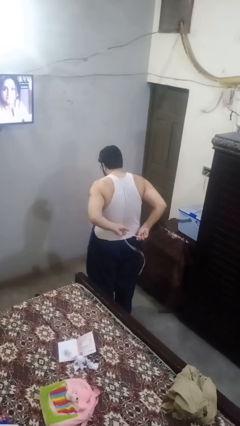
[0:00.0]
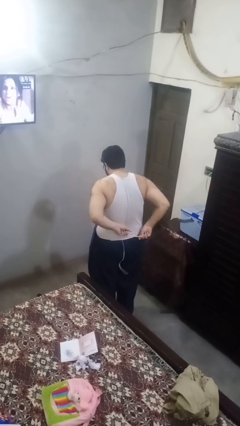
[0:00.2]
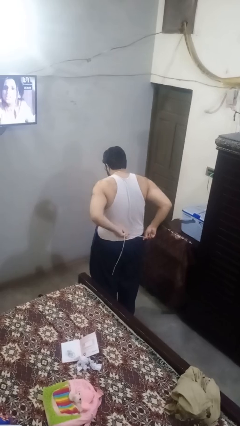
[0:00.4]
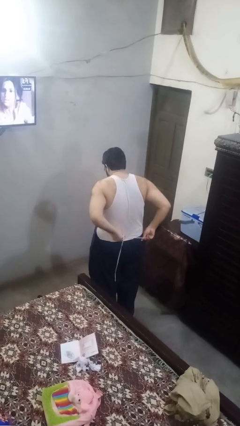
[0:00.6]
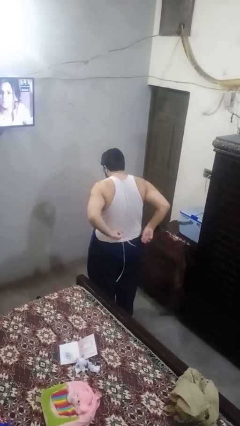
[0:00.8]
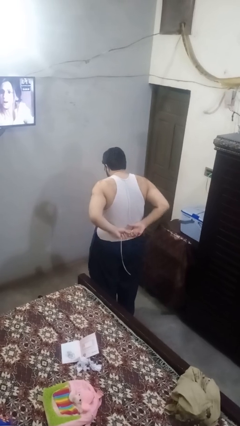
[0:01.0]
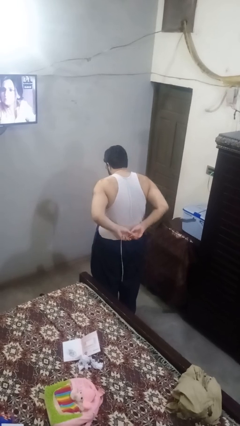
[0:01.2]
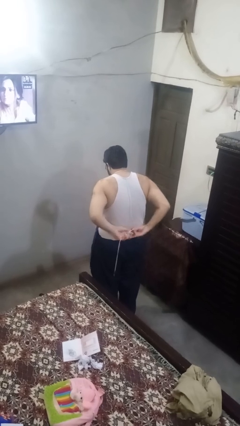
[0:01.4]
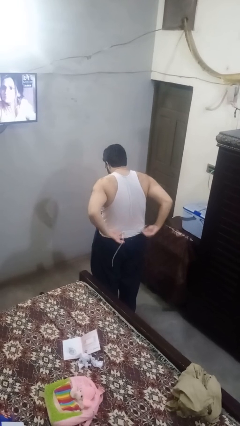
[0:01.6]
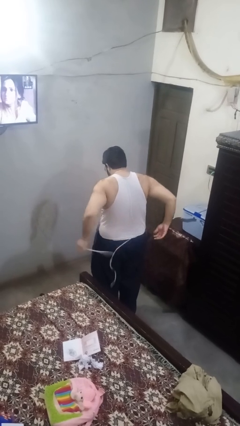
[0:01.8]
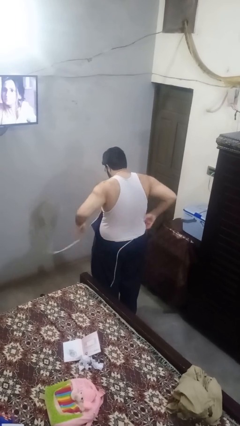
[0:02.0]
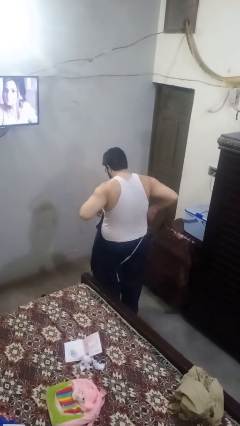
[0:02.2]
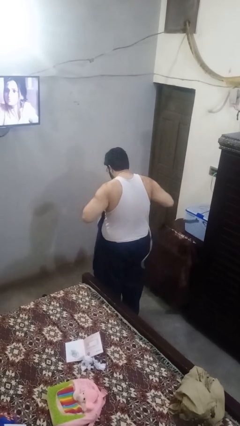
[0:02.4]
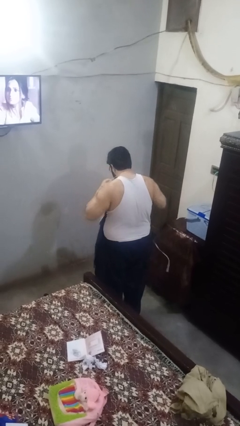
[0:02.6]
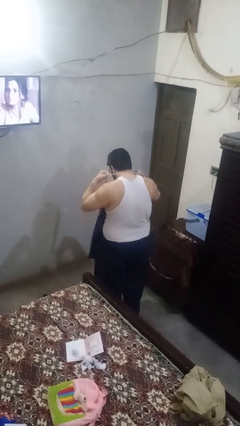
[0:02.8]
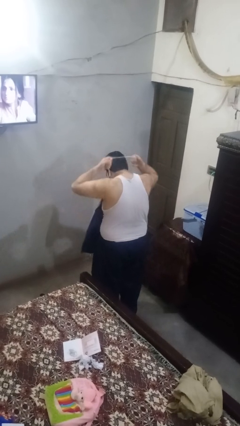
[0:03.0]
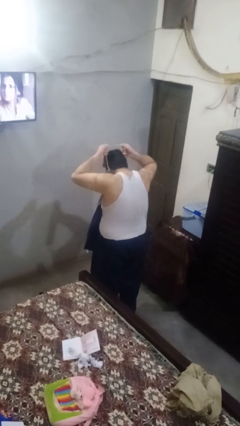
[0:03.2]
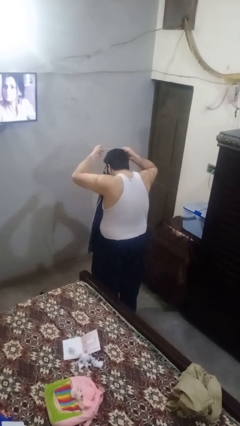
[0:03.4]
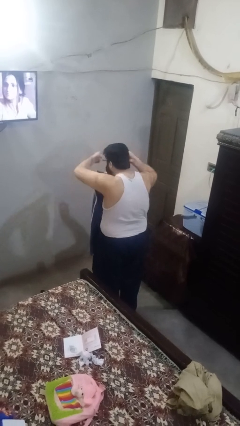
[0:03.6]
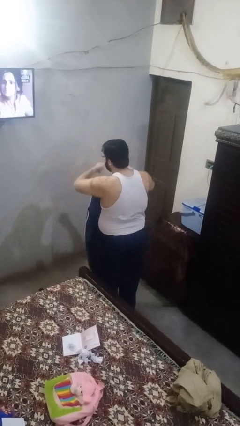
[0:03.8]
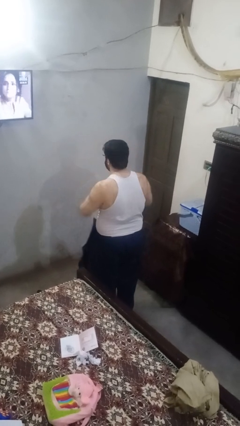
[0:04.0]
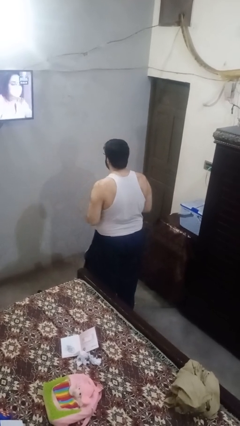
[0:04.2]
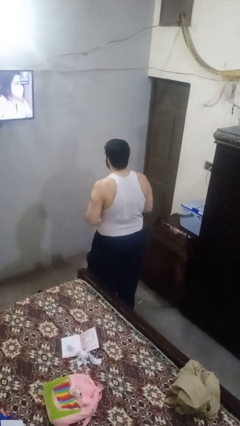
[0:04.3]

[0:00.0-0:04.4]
person takes off apron

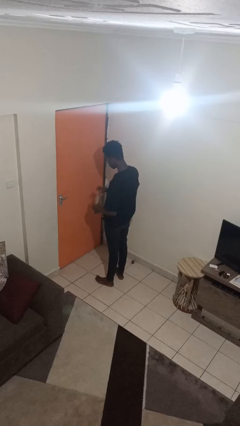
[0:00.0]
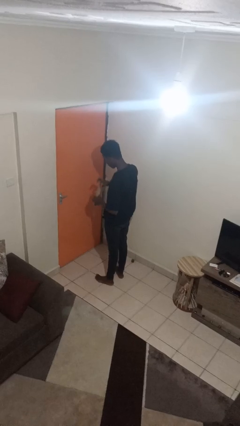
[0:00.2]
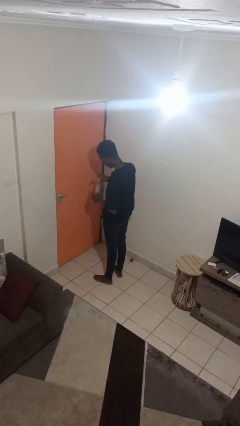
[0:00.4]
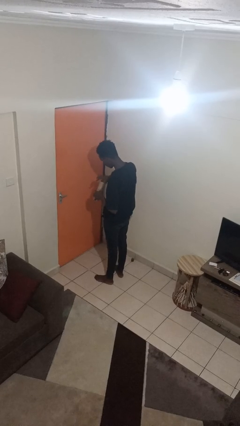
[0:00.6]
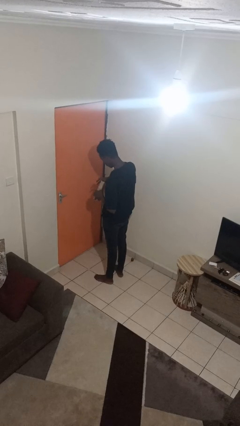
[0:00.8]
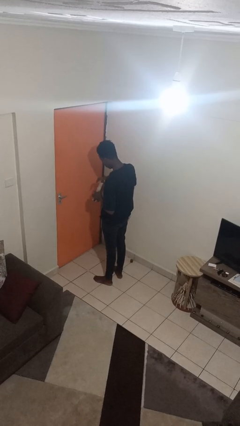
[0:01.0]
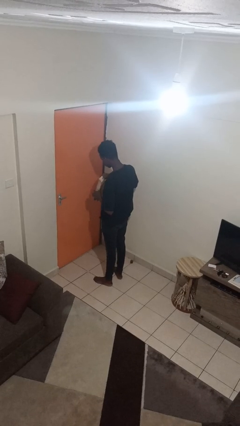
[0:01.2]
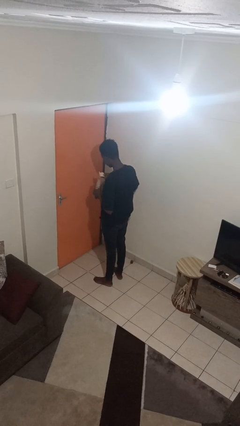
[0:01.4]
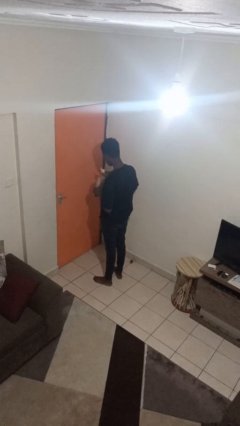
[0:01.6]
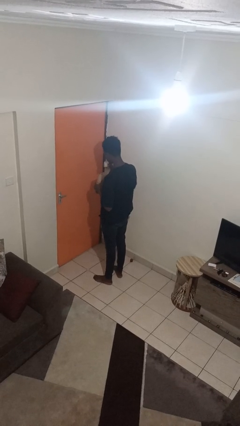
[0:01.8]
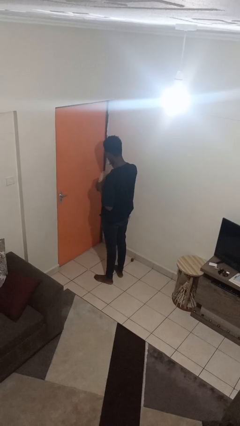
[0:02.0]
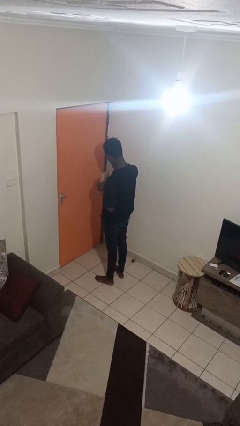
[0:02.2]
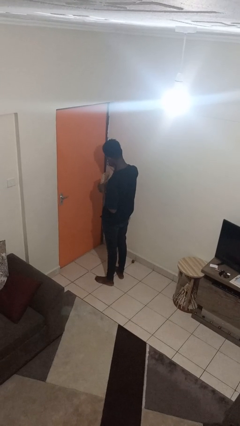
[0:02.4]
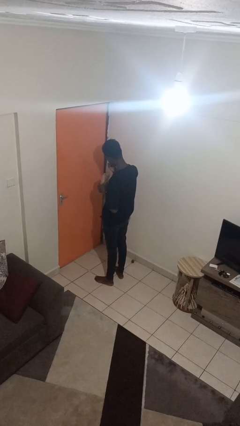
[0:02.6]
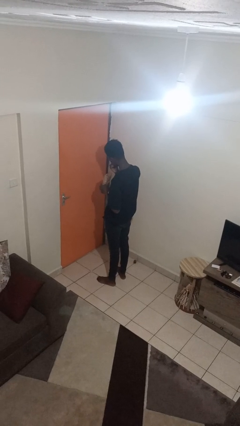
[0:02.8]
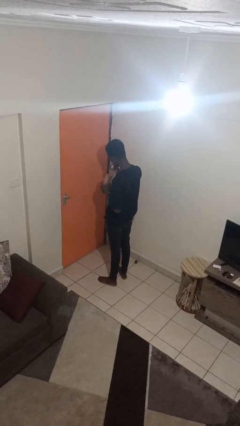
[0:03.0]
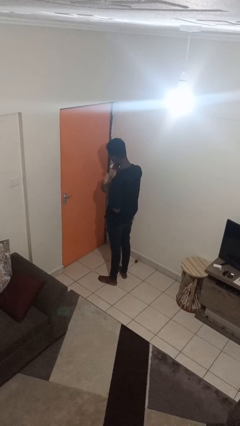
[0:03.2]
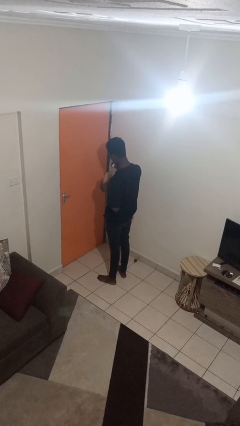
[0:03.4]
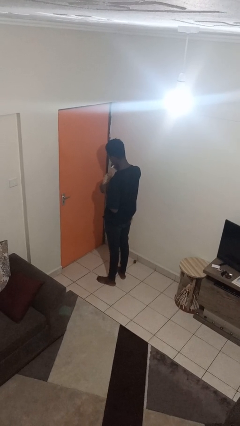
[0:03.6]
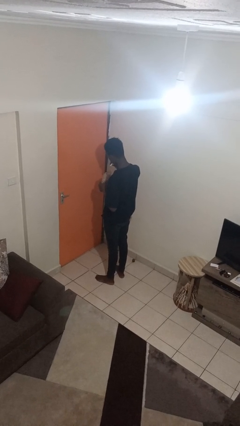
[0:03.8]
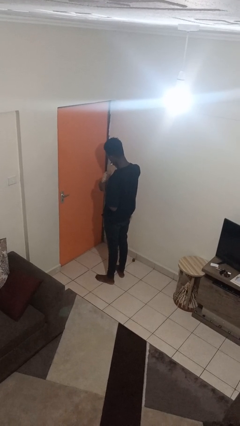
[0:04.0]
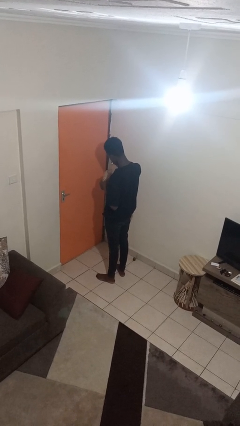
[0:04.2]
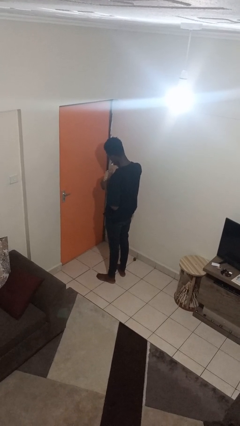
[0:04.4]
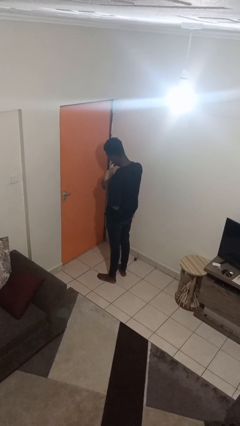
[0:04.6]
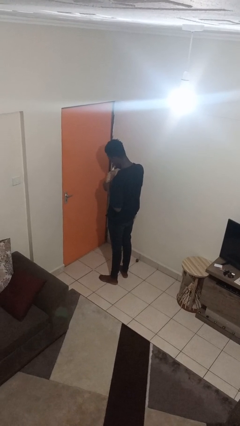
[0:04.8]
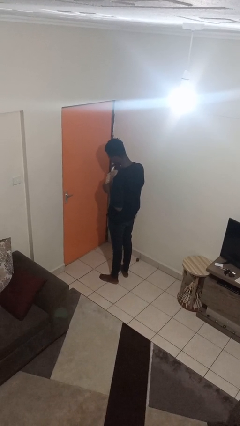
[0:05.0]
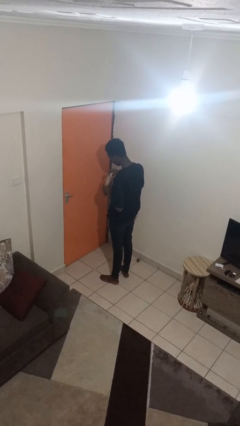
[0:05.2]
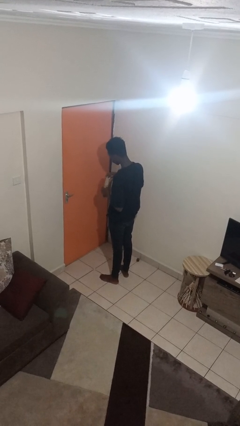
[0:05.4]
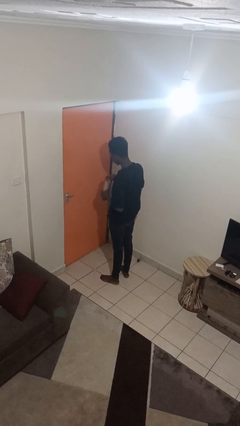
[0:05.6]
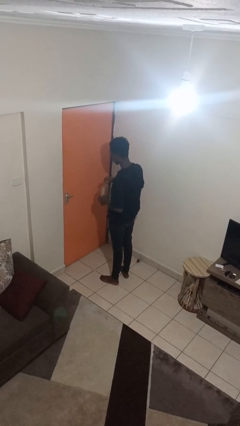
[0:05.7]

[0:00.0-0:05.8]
person eats snack from bag

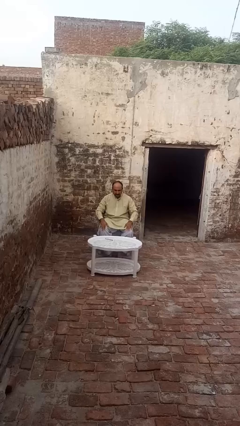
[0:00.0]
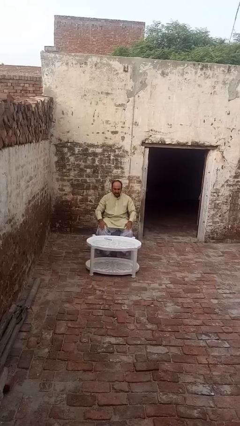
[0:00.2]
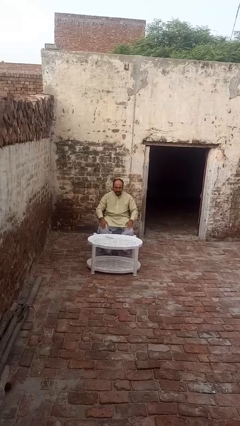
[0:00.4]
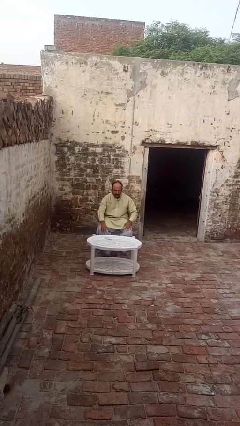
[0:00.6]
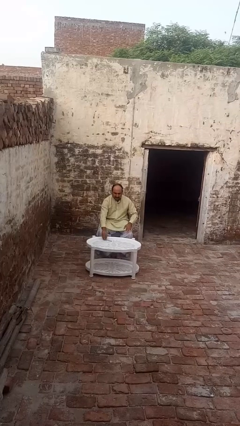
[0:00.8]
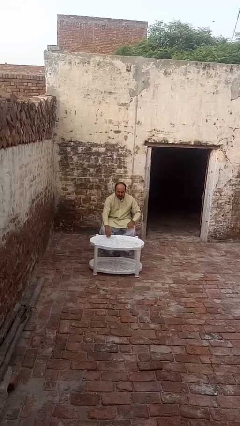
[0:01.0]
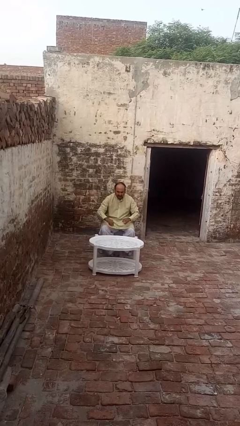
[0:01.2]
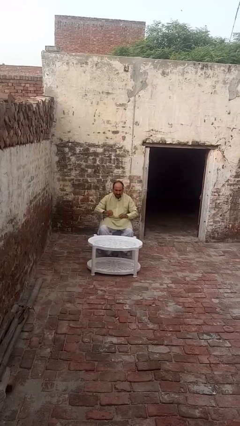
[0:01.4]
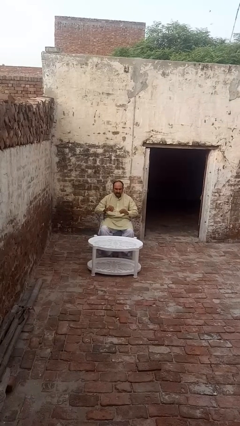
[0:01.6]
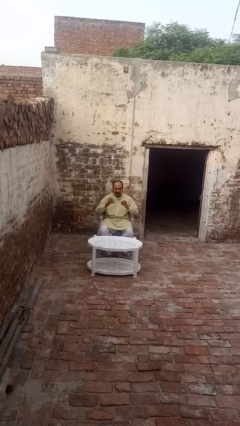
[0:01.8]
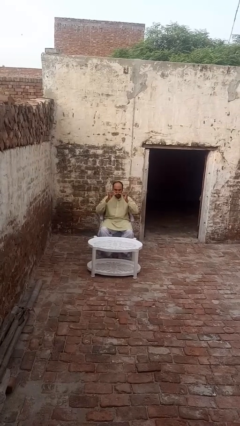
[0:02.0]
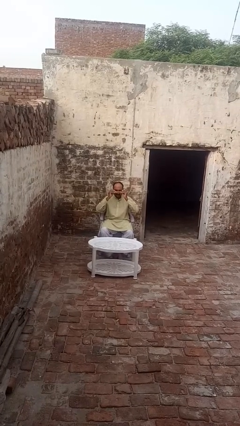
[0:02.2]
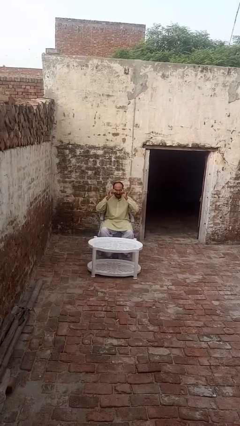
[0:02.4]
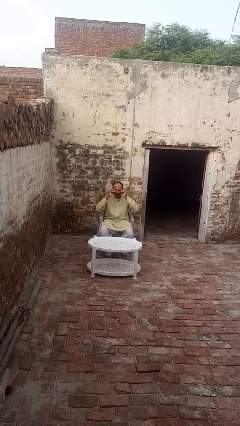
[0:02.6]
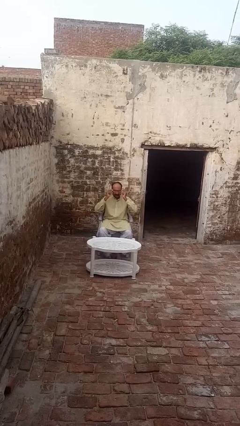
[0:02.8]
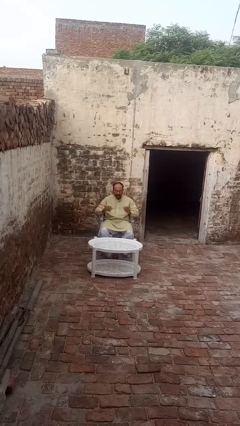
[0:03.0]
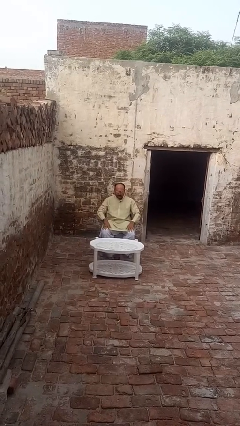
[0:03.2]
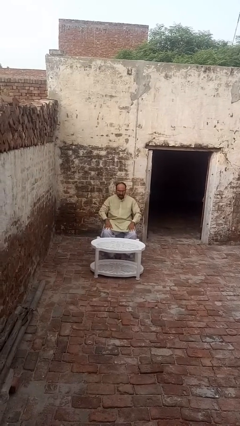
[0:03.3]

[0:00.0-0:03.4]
person puts on glasses

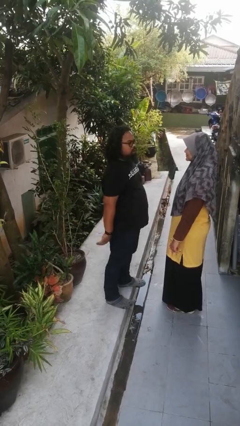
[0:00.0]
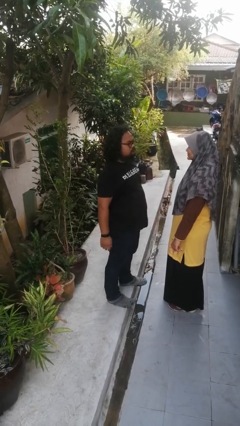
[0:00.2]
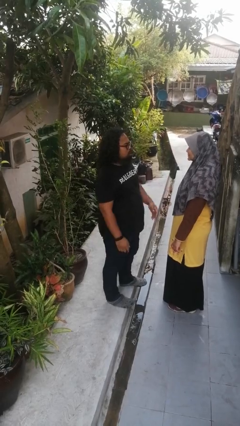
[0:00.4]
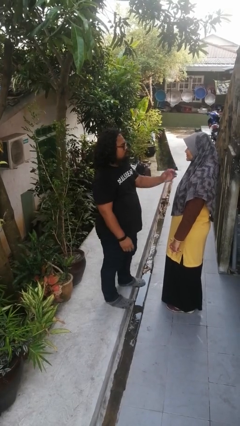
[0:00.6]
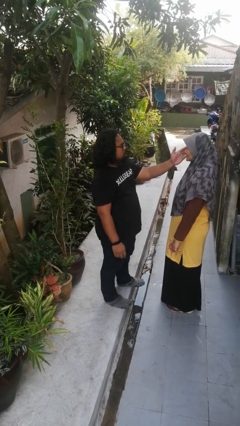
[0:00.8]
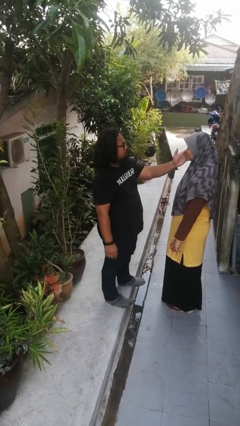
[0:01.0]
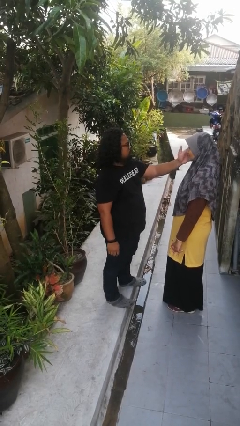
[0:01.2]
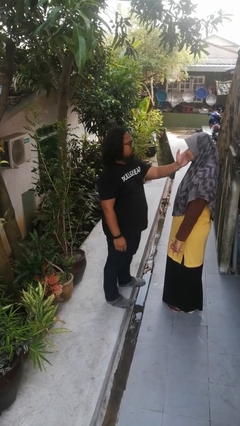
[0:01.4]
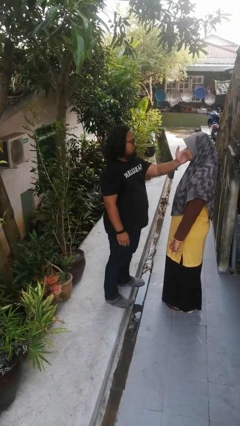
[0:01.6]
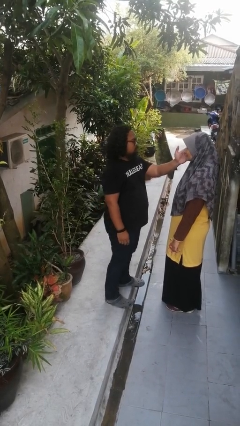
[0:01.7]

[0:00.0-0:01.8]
person touches face of person

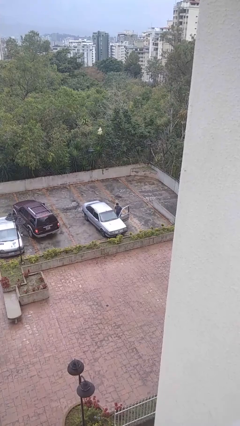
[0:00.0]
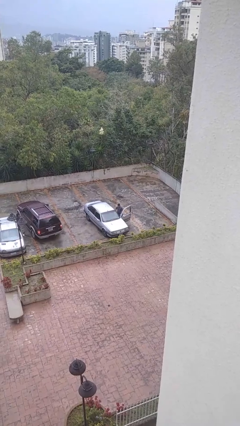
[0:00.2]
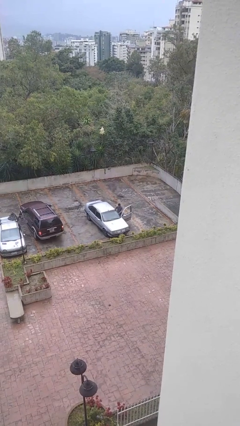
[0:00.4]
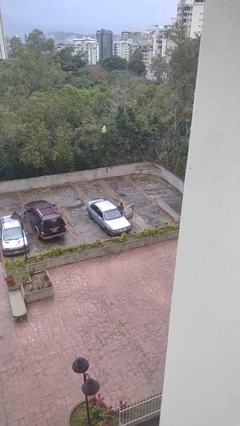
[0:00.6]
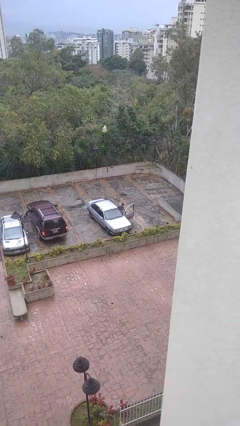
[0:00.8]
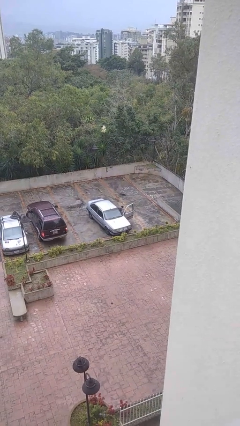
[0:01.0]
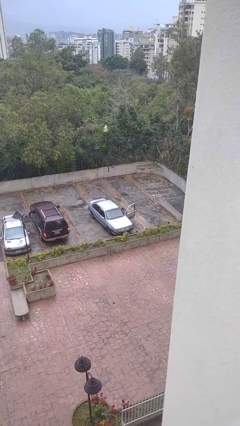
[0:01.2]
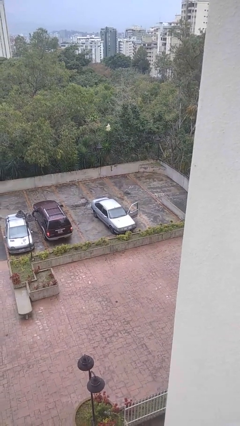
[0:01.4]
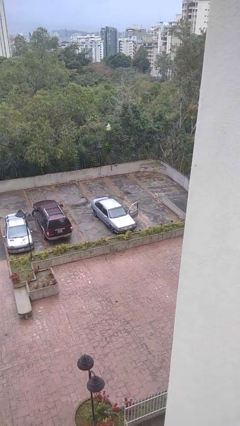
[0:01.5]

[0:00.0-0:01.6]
person enters car

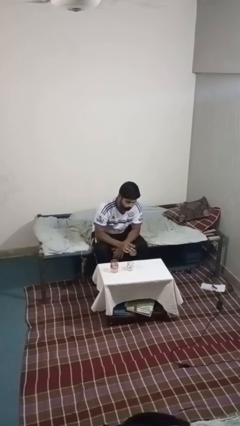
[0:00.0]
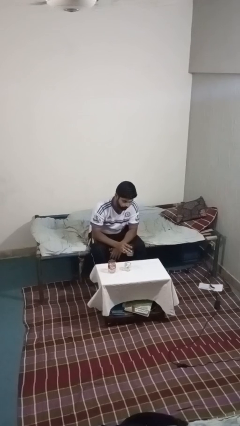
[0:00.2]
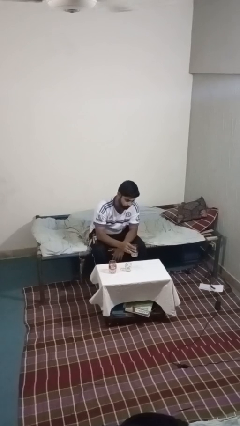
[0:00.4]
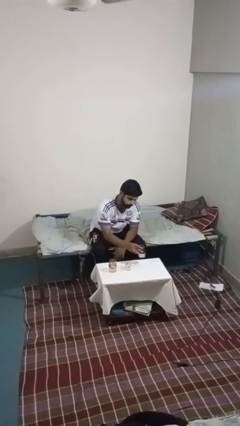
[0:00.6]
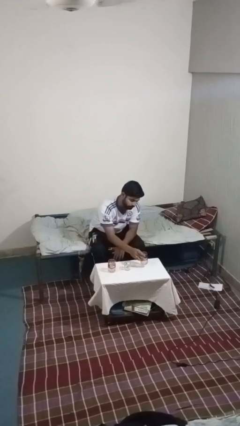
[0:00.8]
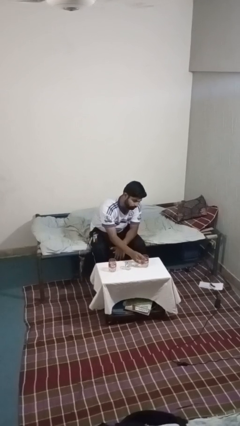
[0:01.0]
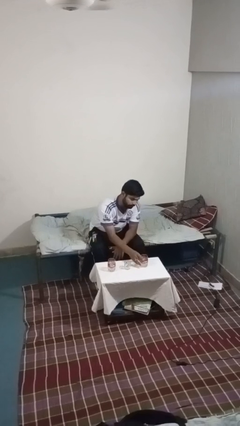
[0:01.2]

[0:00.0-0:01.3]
person puts down object on table
